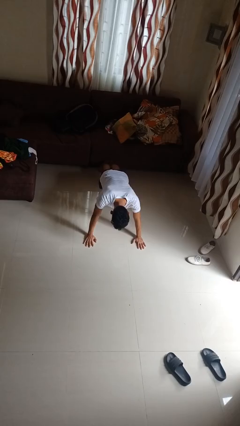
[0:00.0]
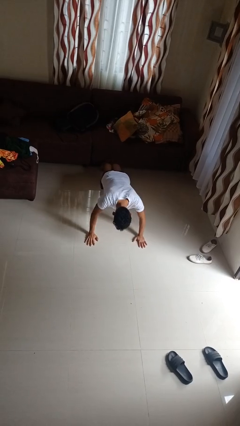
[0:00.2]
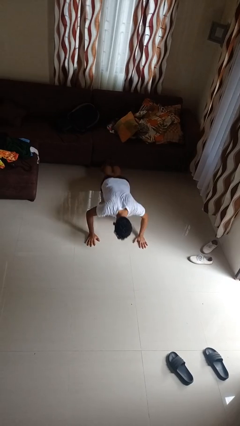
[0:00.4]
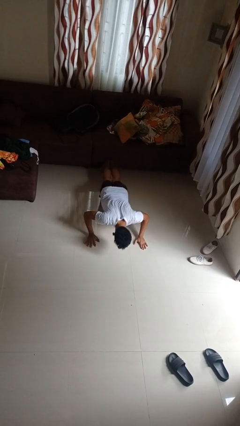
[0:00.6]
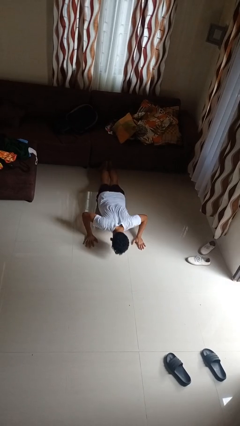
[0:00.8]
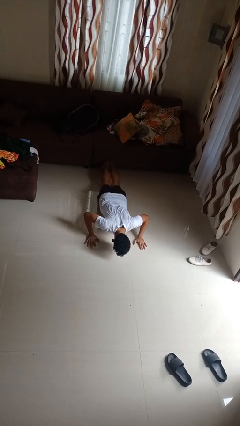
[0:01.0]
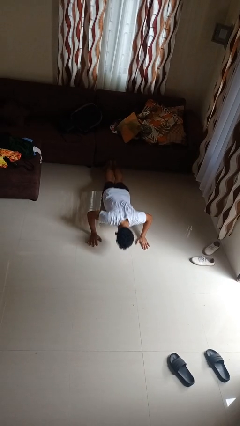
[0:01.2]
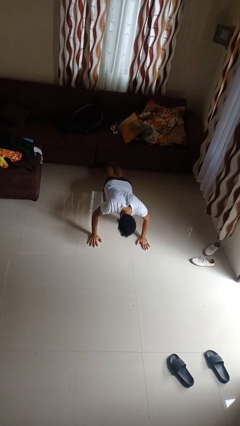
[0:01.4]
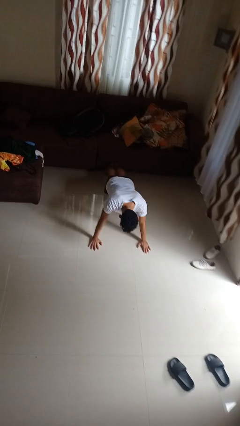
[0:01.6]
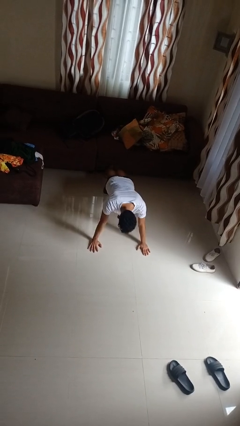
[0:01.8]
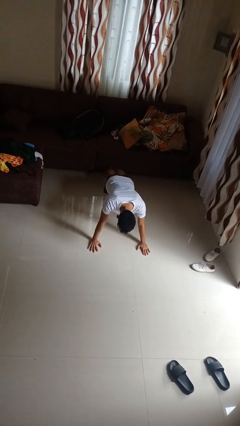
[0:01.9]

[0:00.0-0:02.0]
person exercises with pushup

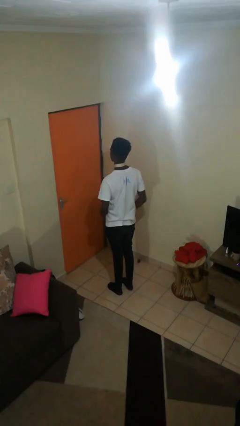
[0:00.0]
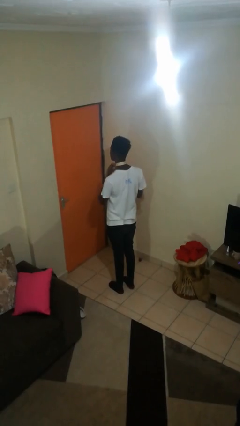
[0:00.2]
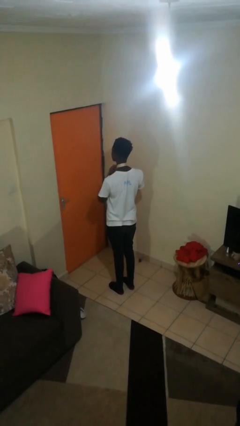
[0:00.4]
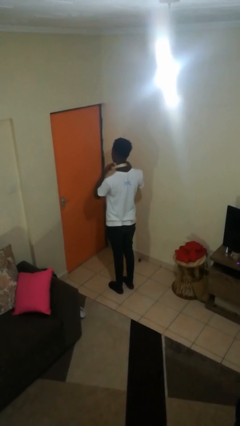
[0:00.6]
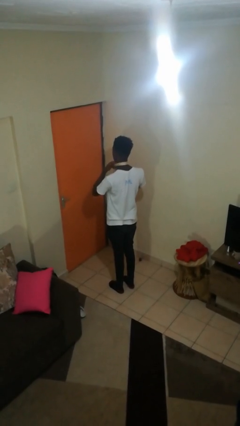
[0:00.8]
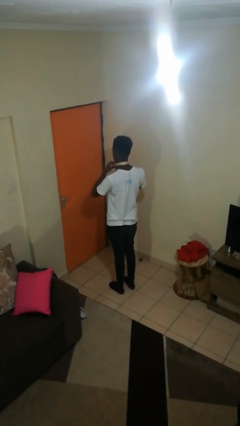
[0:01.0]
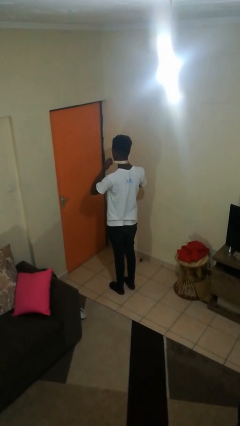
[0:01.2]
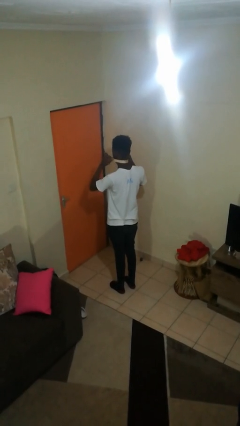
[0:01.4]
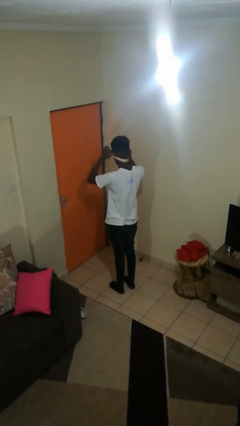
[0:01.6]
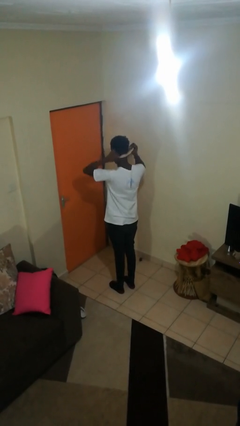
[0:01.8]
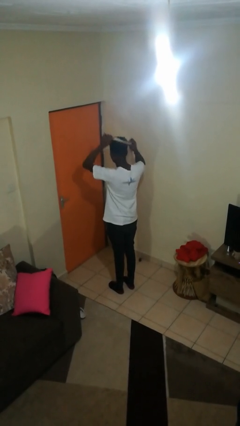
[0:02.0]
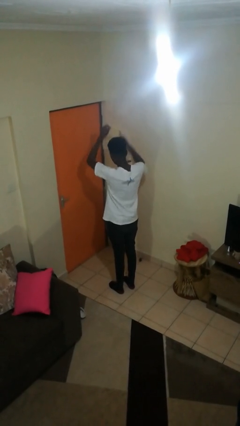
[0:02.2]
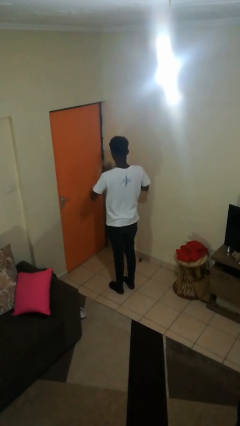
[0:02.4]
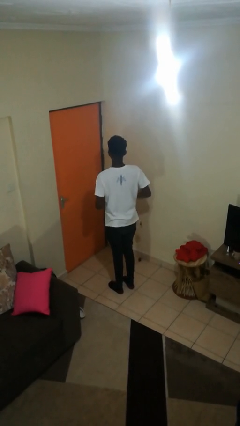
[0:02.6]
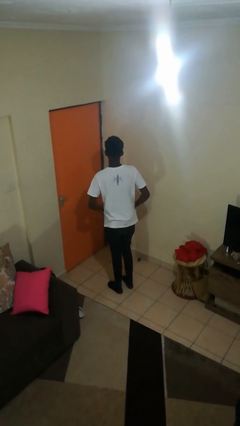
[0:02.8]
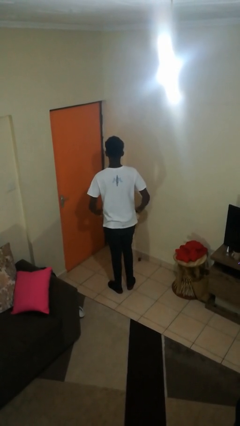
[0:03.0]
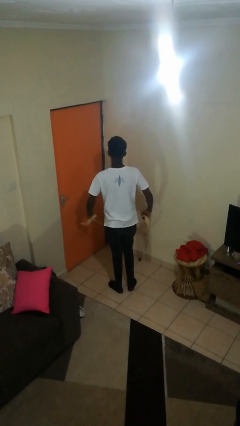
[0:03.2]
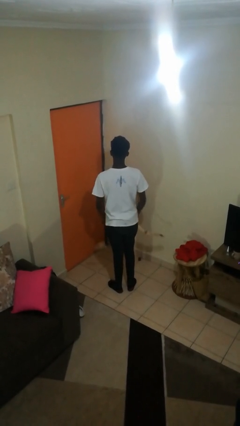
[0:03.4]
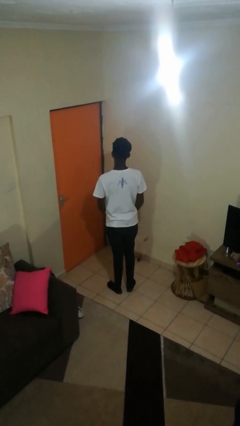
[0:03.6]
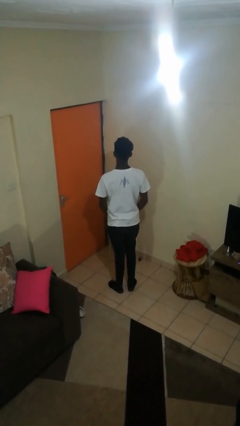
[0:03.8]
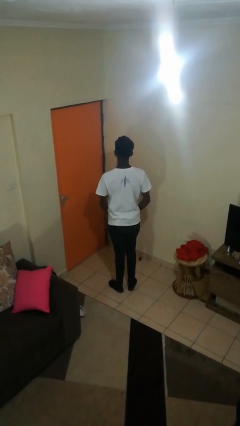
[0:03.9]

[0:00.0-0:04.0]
person takes off necktie

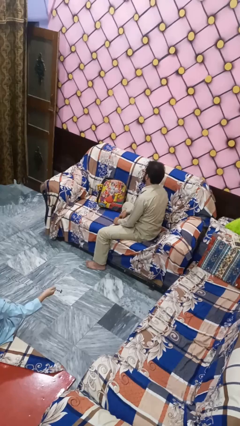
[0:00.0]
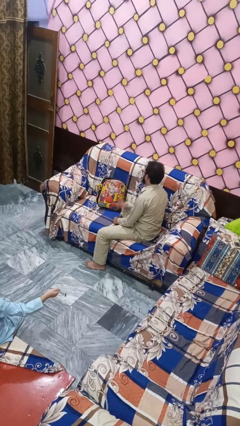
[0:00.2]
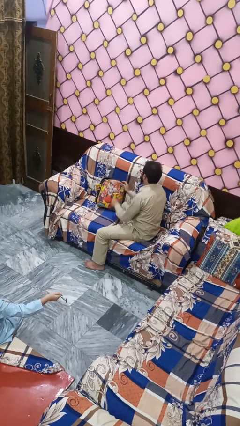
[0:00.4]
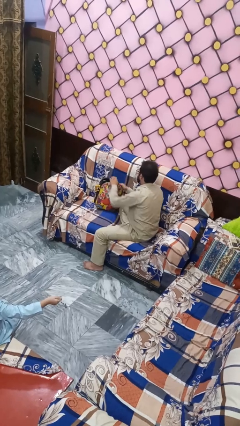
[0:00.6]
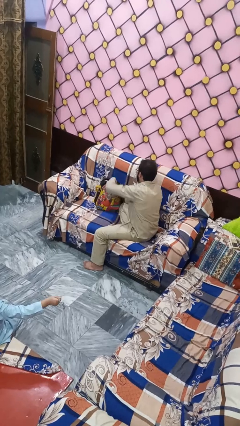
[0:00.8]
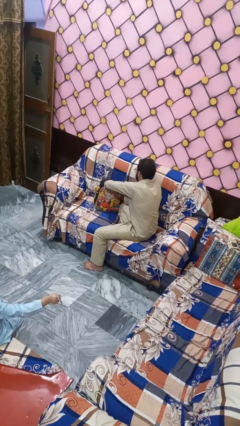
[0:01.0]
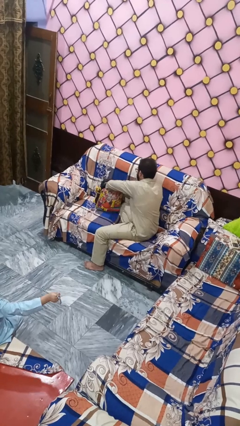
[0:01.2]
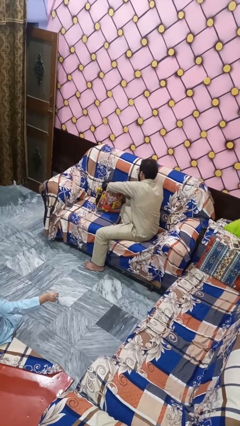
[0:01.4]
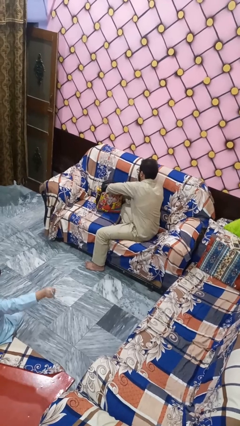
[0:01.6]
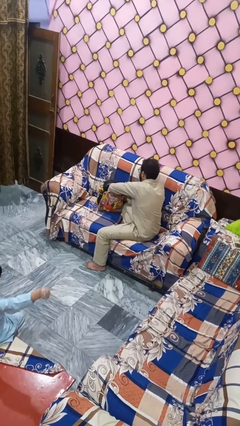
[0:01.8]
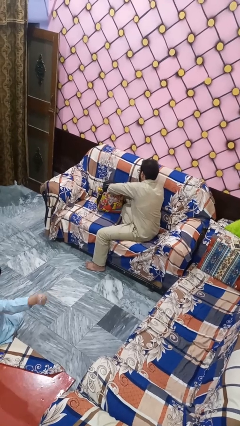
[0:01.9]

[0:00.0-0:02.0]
person searches in bag

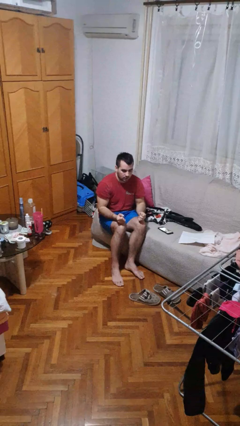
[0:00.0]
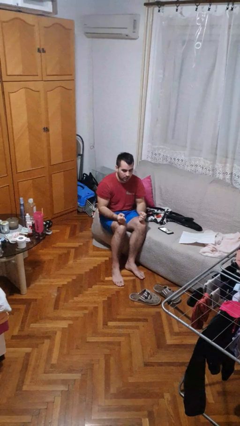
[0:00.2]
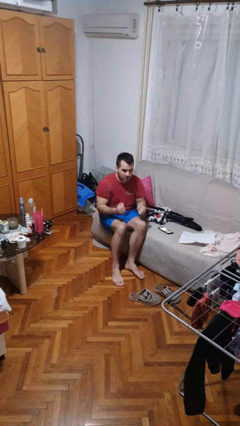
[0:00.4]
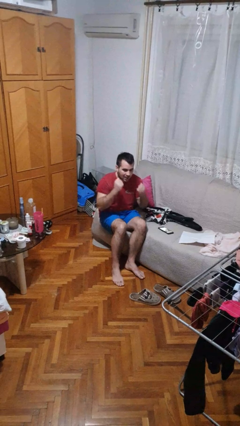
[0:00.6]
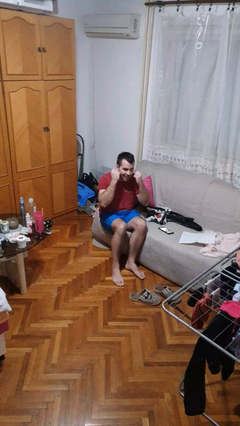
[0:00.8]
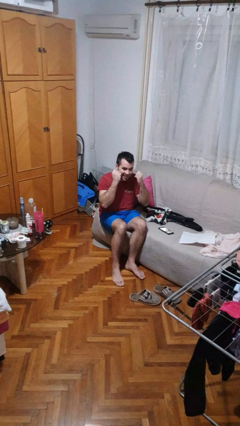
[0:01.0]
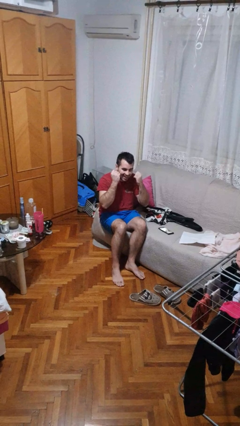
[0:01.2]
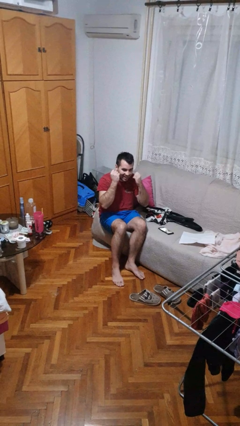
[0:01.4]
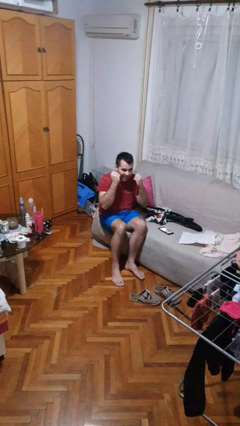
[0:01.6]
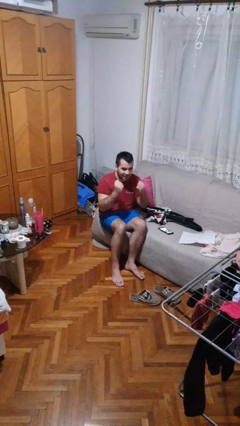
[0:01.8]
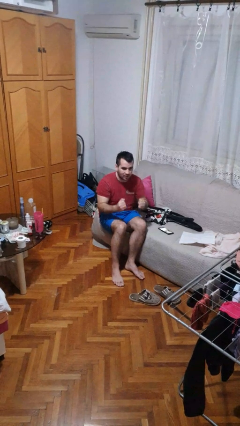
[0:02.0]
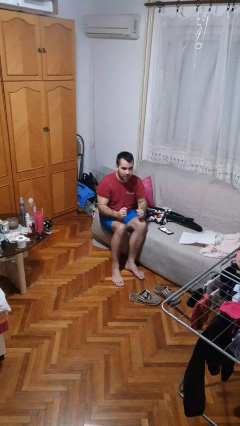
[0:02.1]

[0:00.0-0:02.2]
person flosses

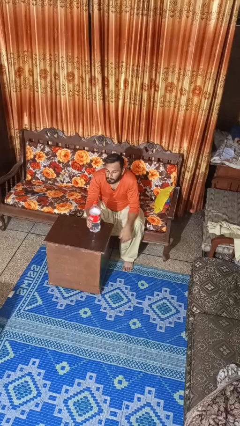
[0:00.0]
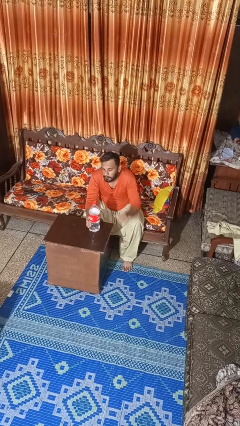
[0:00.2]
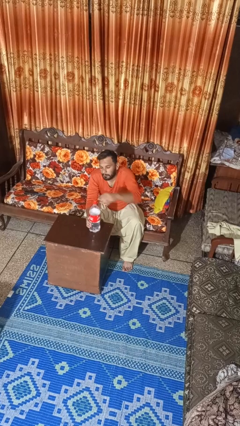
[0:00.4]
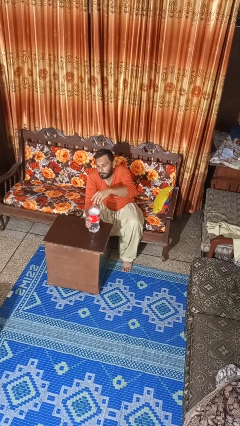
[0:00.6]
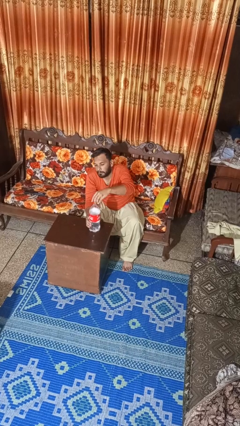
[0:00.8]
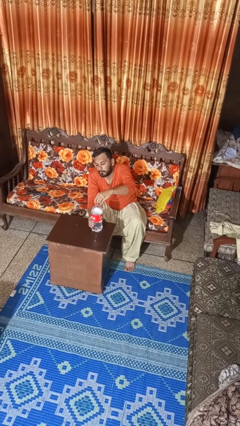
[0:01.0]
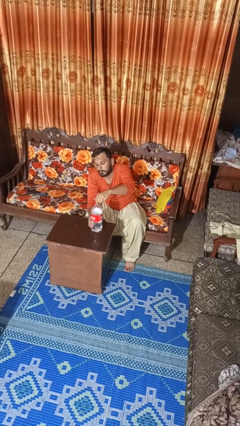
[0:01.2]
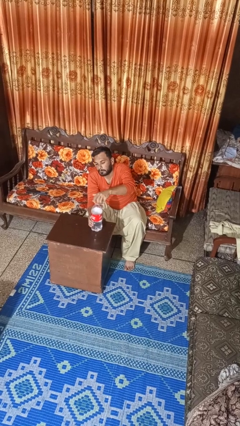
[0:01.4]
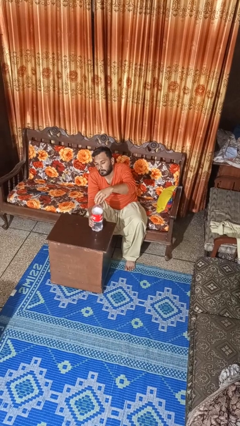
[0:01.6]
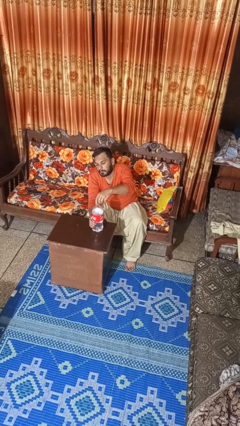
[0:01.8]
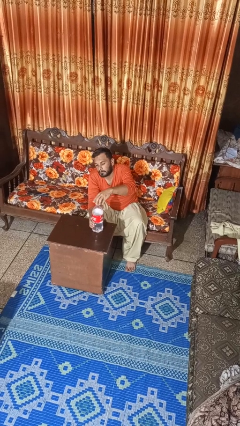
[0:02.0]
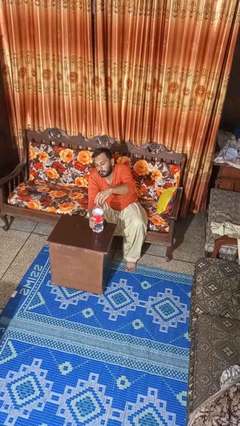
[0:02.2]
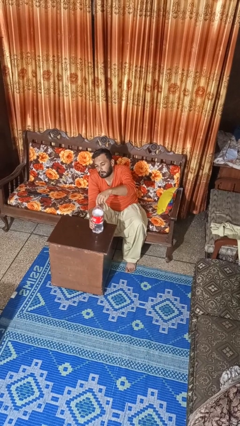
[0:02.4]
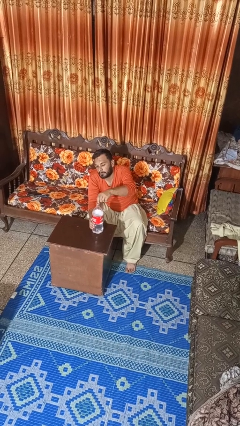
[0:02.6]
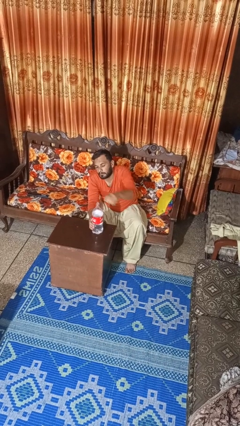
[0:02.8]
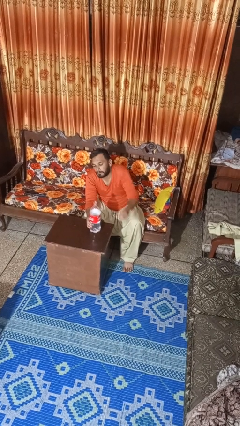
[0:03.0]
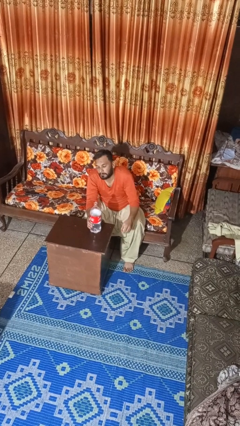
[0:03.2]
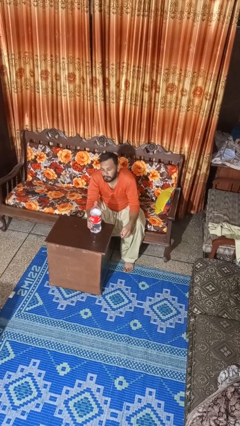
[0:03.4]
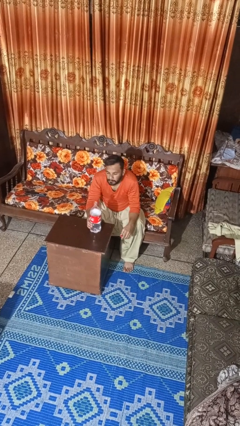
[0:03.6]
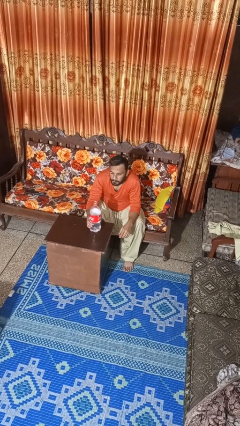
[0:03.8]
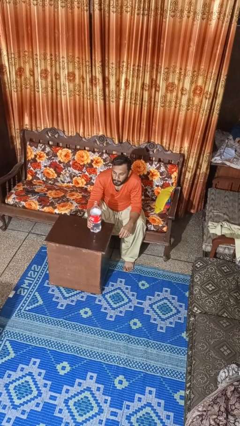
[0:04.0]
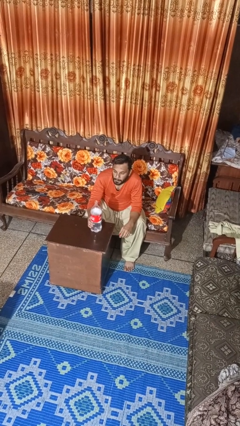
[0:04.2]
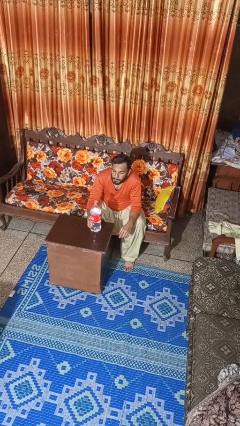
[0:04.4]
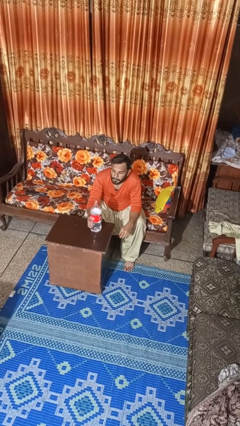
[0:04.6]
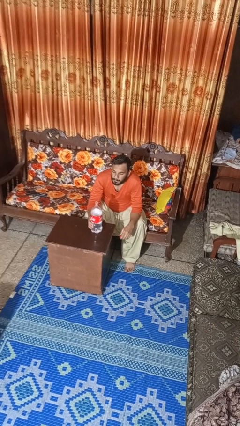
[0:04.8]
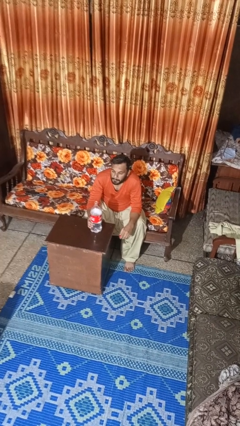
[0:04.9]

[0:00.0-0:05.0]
person unscrews lid from bottle

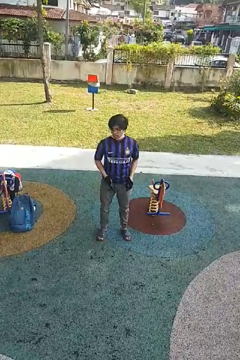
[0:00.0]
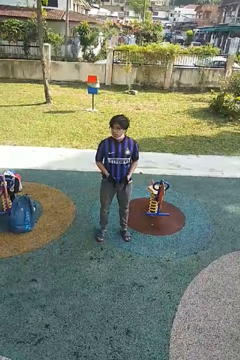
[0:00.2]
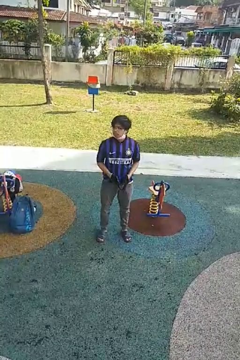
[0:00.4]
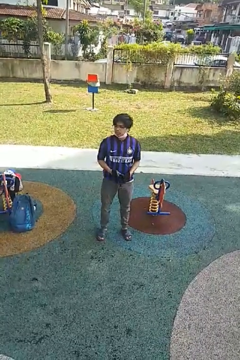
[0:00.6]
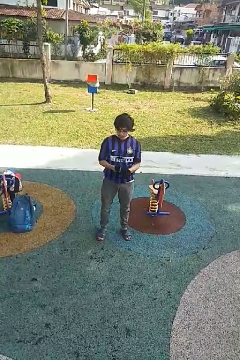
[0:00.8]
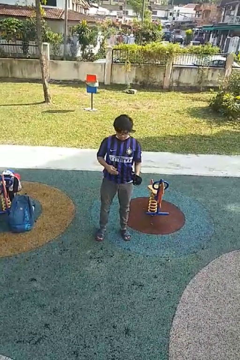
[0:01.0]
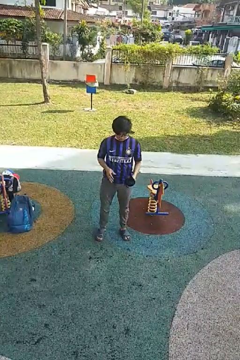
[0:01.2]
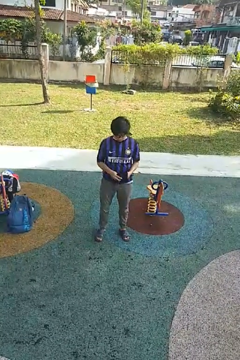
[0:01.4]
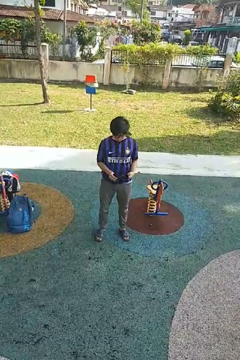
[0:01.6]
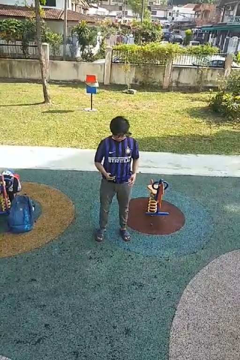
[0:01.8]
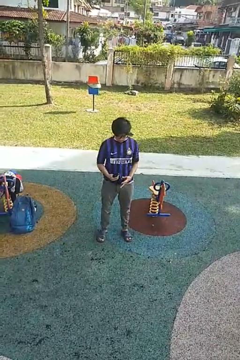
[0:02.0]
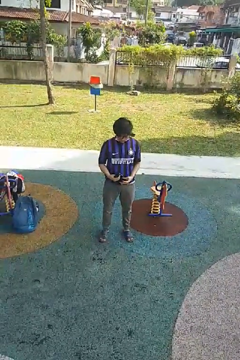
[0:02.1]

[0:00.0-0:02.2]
person takes off gloves
